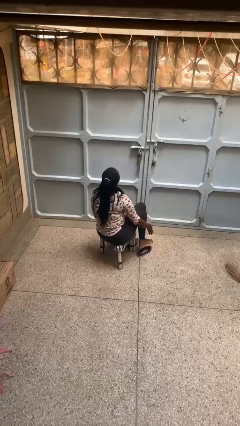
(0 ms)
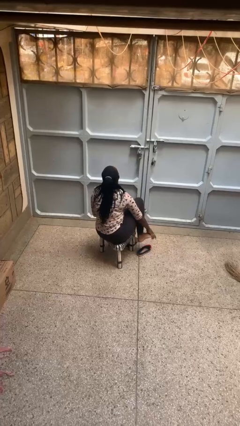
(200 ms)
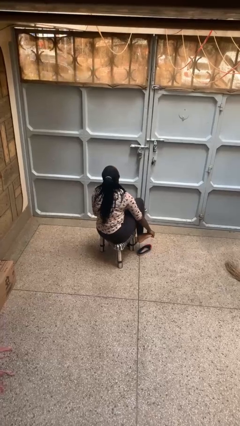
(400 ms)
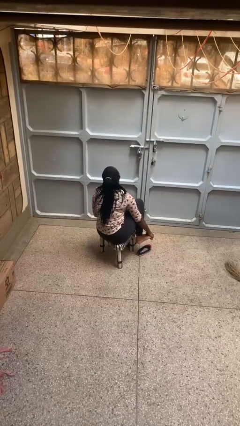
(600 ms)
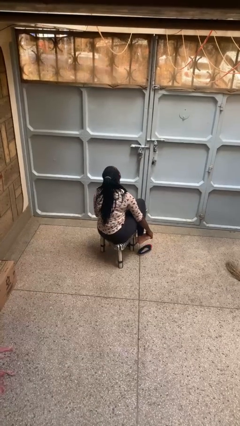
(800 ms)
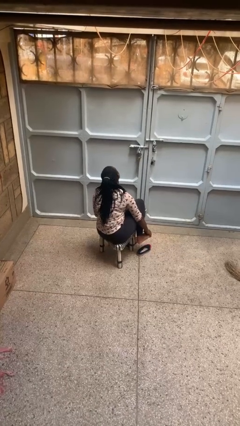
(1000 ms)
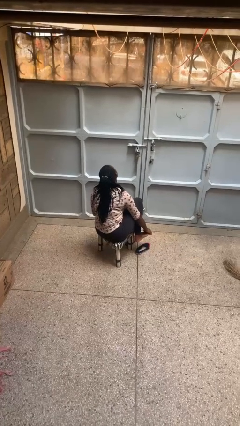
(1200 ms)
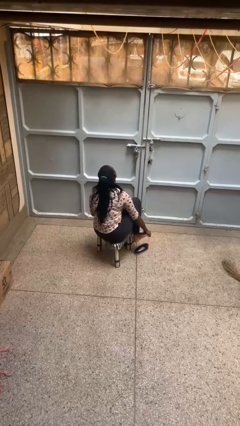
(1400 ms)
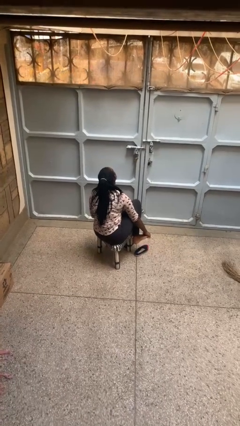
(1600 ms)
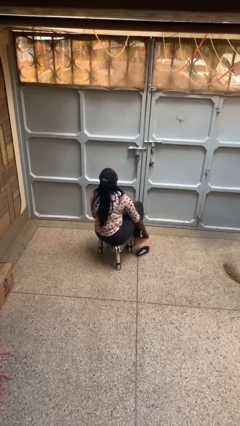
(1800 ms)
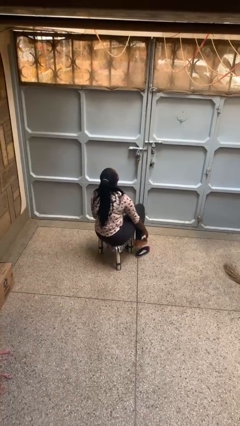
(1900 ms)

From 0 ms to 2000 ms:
person rubs foot

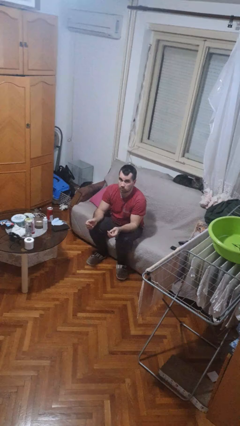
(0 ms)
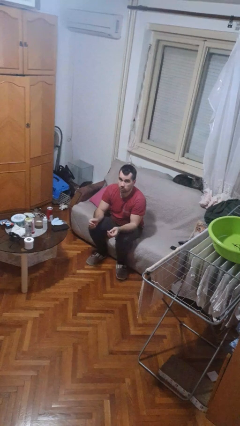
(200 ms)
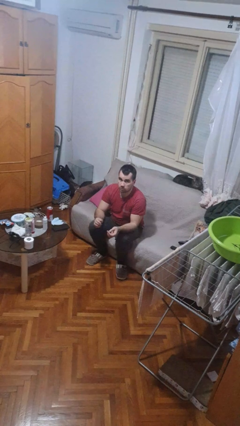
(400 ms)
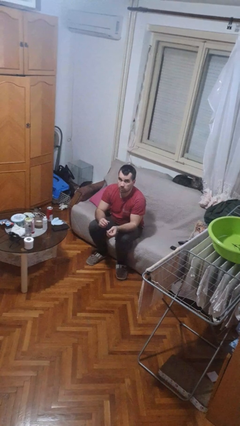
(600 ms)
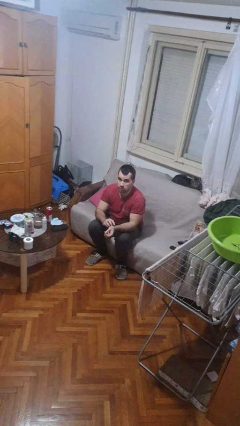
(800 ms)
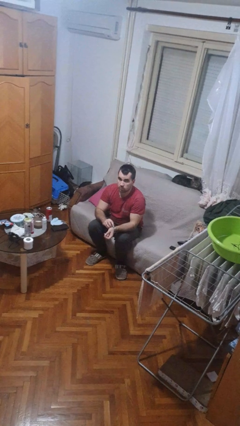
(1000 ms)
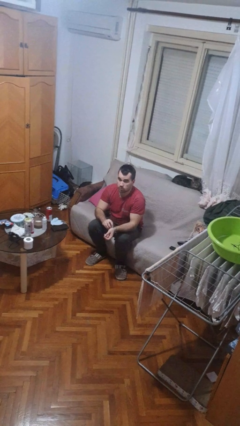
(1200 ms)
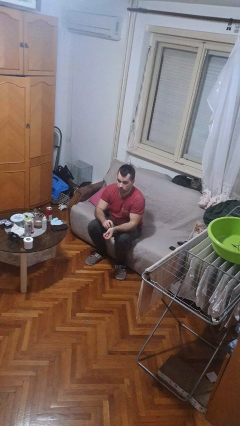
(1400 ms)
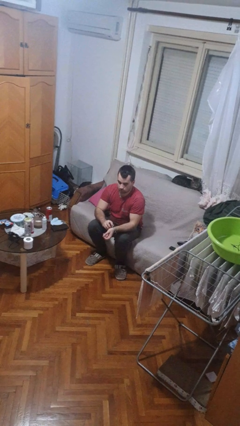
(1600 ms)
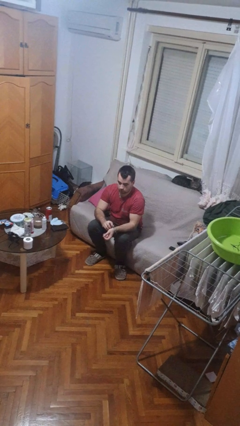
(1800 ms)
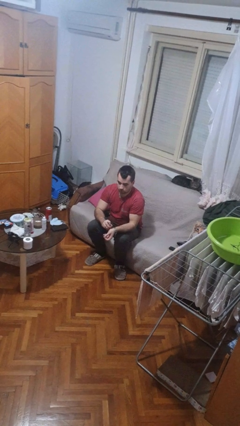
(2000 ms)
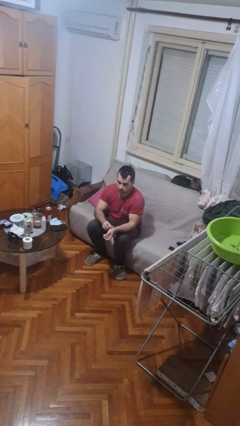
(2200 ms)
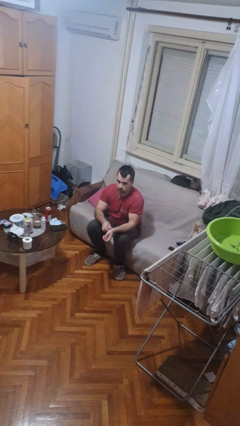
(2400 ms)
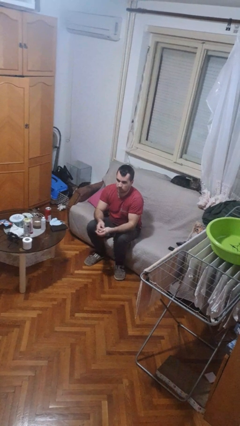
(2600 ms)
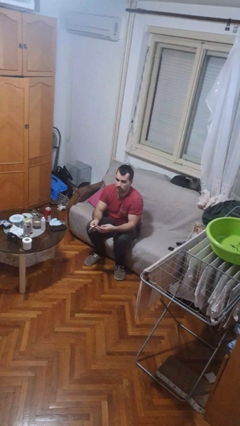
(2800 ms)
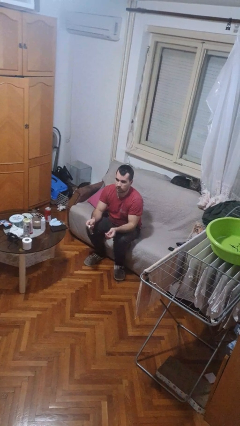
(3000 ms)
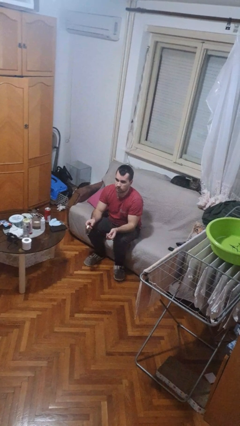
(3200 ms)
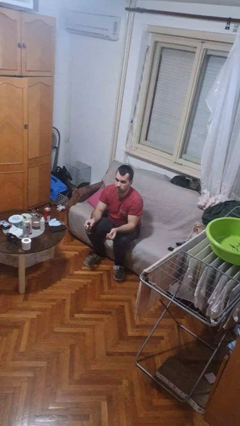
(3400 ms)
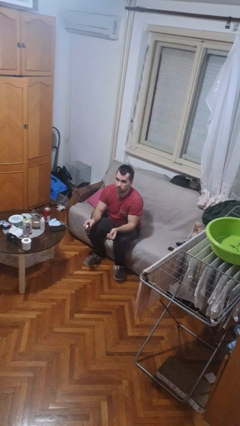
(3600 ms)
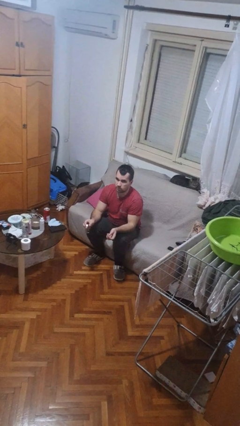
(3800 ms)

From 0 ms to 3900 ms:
person takes off wristwatch

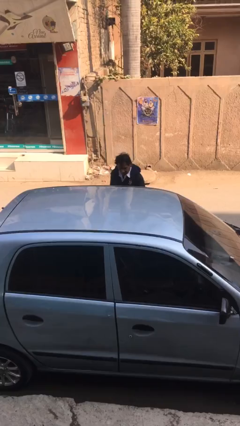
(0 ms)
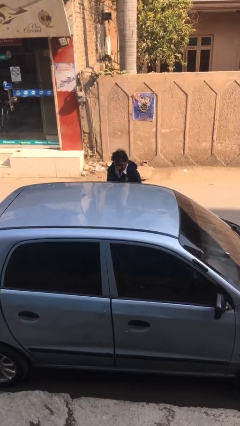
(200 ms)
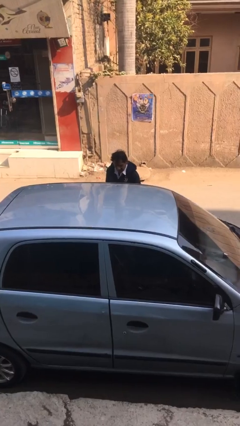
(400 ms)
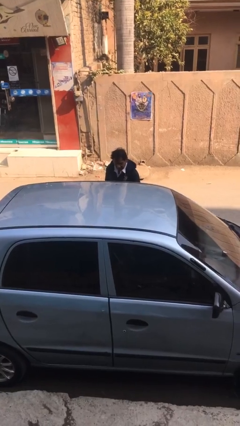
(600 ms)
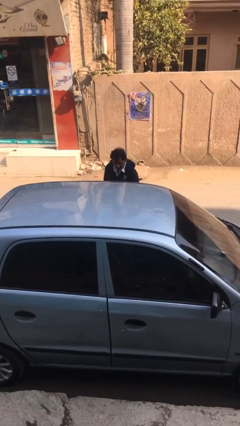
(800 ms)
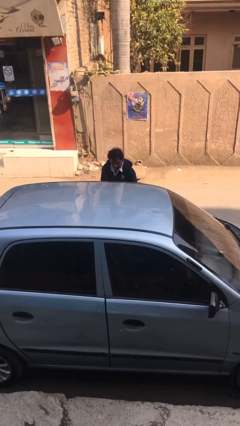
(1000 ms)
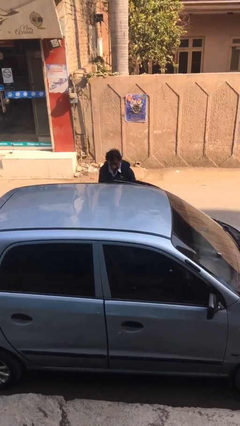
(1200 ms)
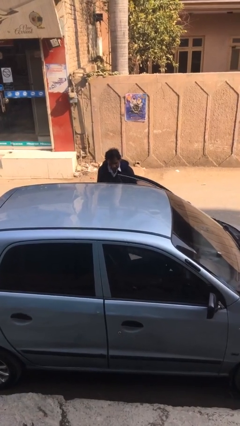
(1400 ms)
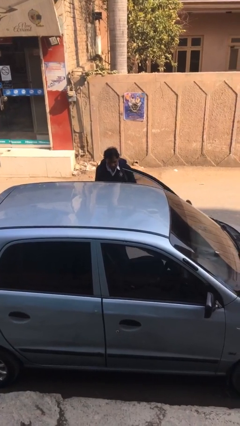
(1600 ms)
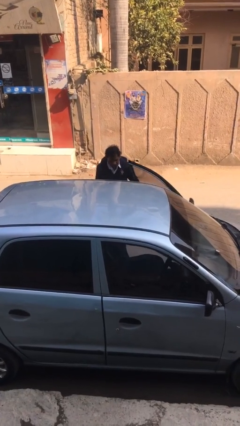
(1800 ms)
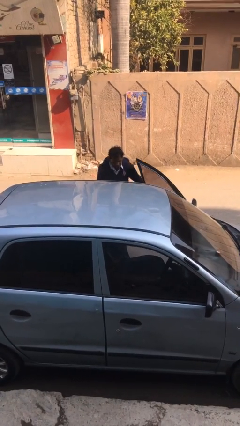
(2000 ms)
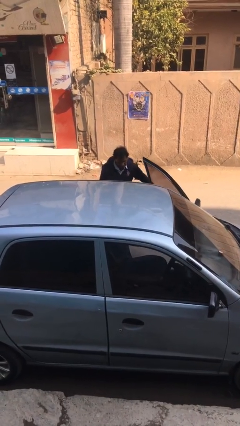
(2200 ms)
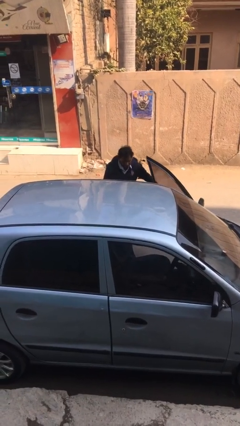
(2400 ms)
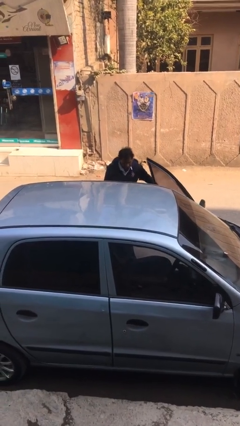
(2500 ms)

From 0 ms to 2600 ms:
person opens car door

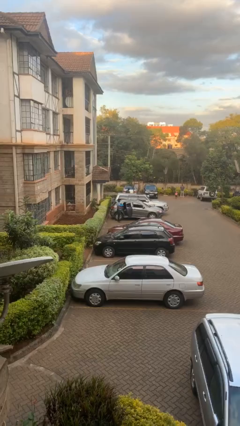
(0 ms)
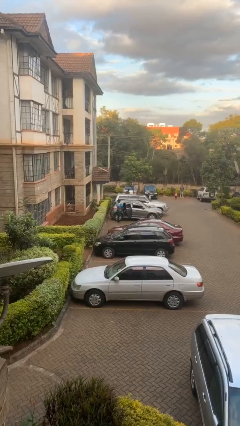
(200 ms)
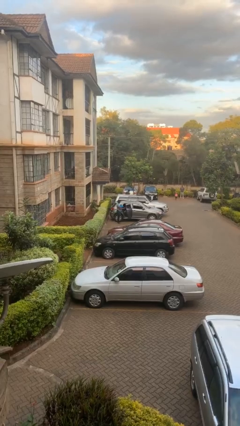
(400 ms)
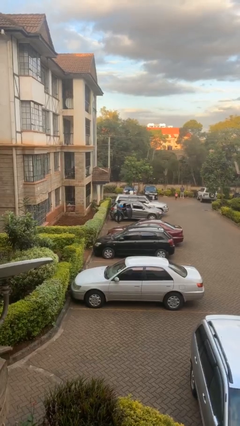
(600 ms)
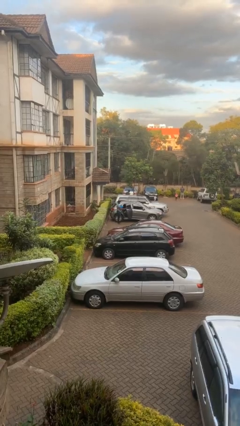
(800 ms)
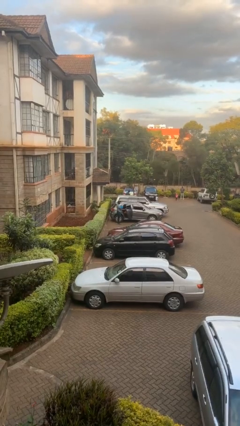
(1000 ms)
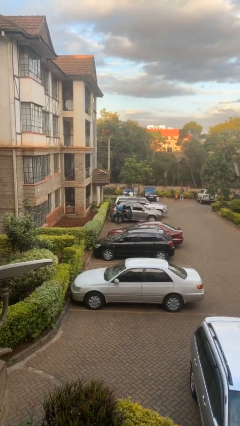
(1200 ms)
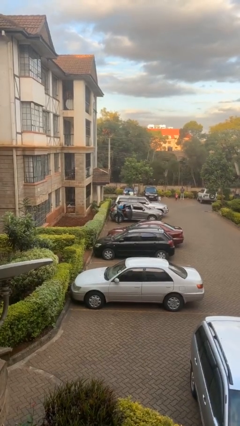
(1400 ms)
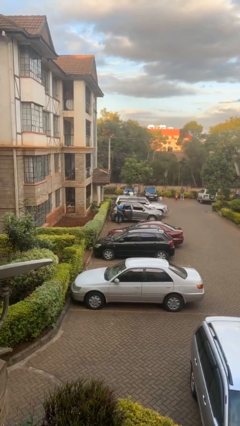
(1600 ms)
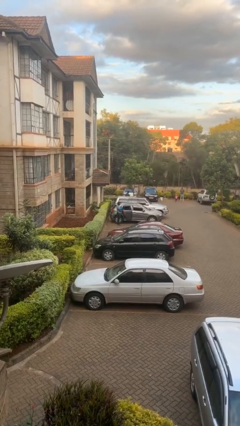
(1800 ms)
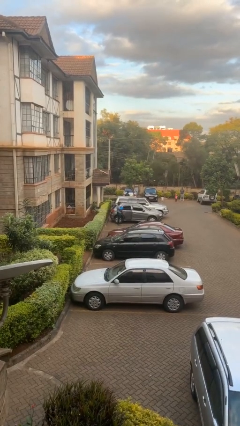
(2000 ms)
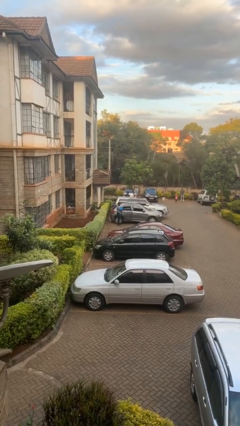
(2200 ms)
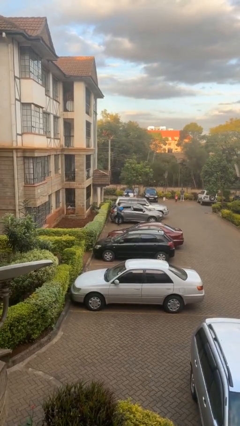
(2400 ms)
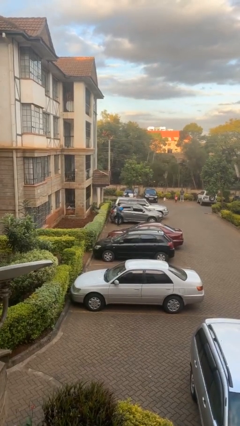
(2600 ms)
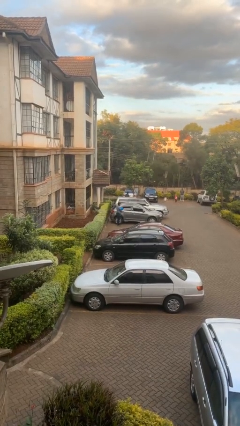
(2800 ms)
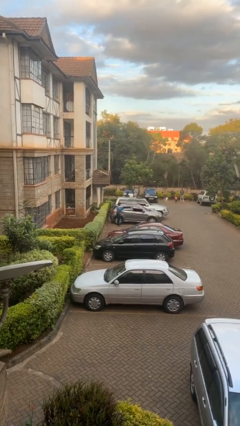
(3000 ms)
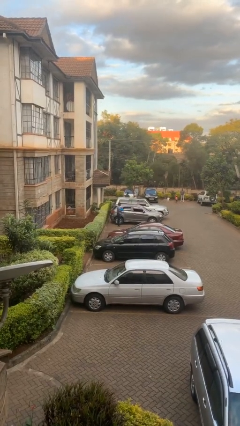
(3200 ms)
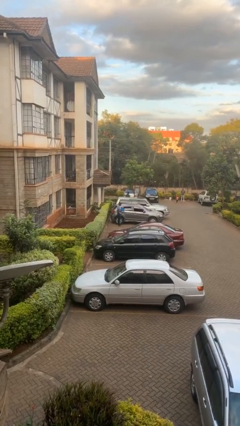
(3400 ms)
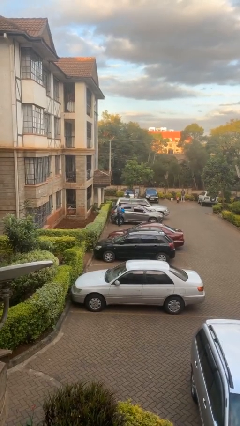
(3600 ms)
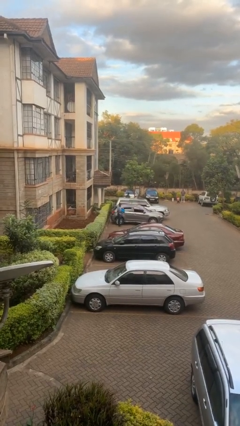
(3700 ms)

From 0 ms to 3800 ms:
person closes car door

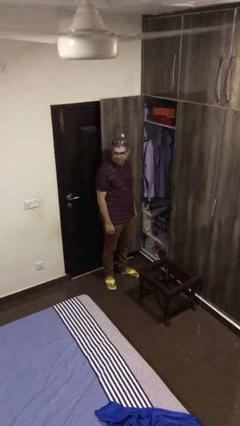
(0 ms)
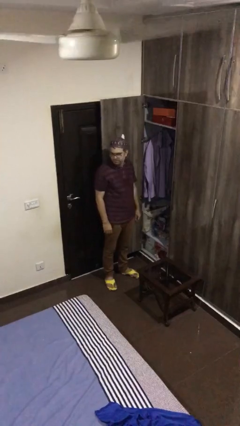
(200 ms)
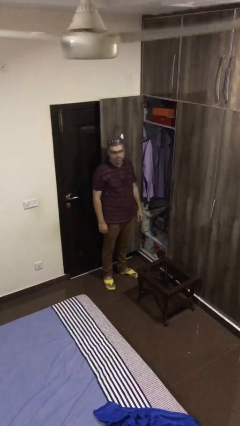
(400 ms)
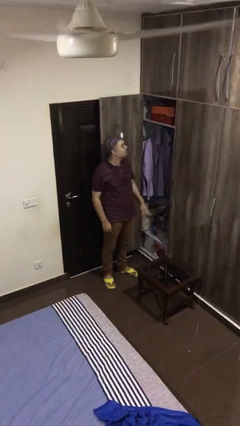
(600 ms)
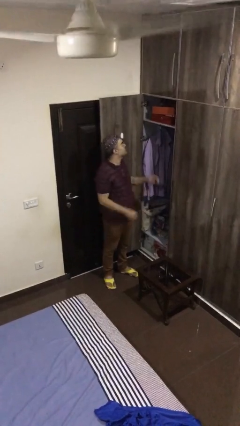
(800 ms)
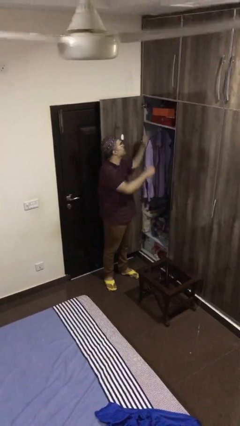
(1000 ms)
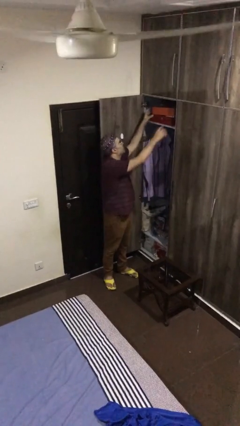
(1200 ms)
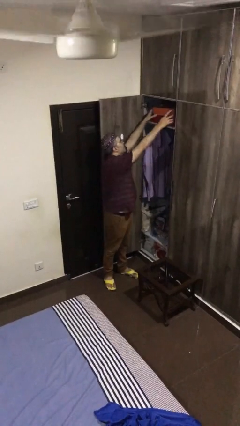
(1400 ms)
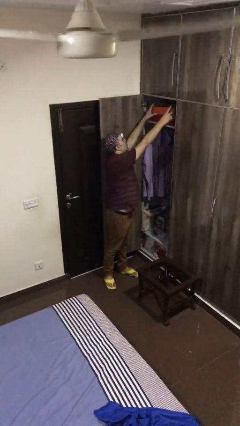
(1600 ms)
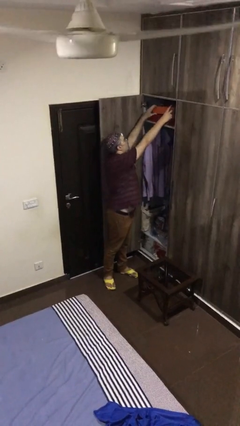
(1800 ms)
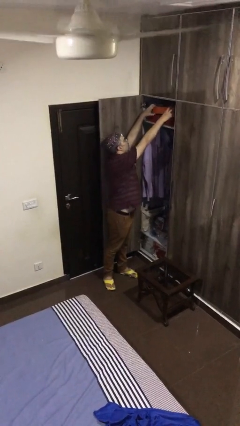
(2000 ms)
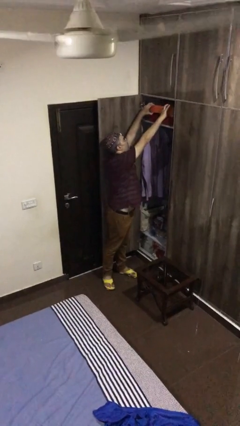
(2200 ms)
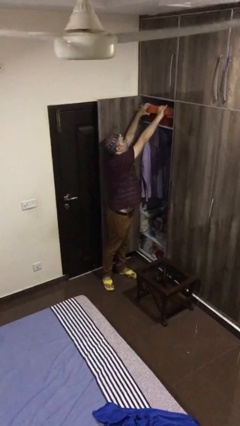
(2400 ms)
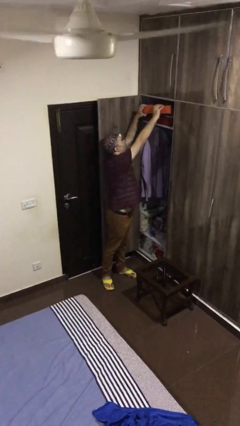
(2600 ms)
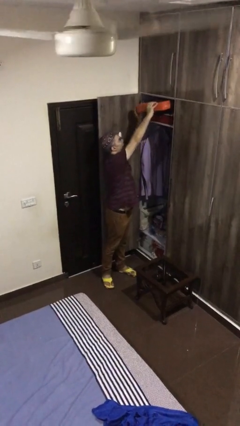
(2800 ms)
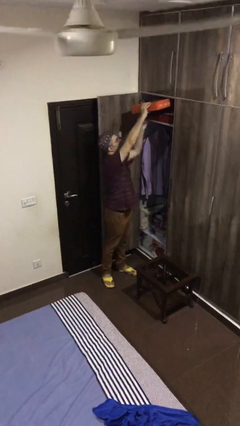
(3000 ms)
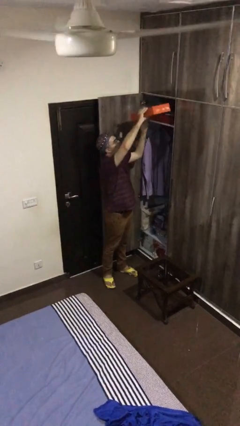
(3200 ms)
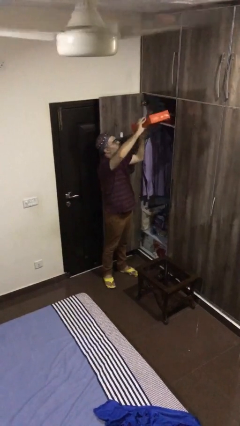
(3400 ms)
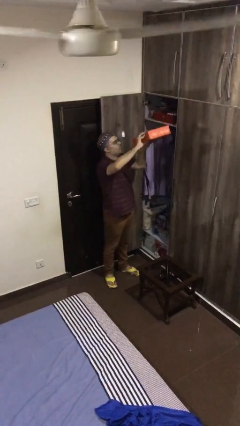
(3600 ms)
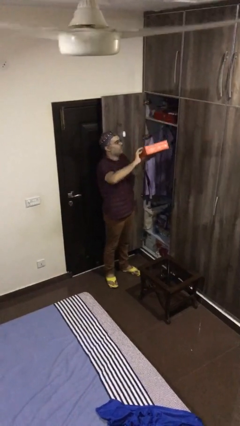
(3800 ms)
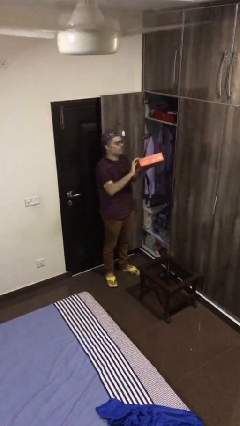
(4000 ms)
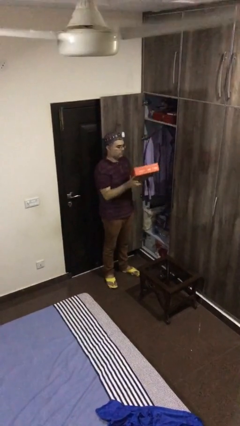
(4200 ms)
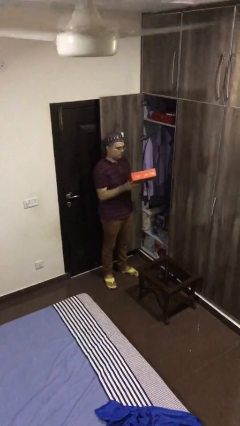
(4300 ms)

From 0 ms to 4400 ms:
person picks up object from shelf

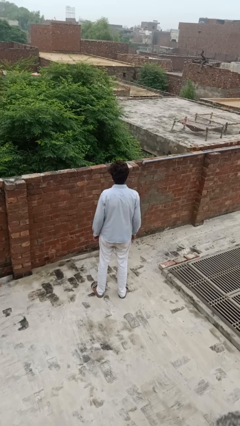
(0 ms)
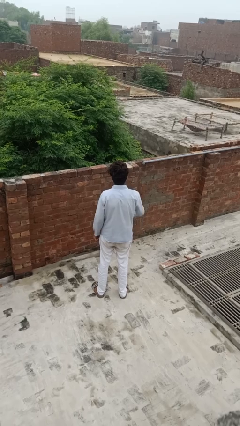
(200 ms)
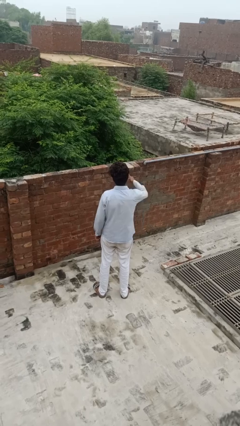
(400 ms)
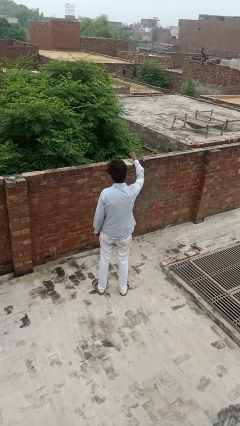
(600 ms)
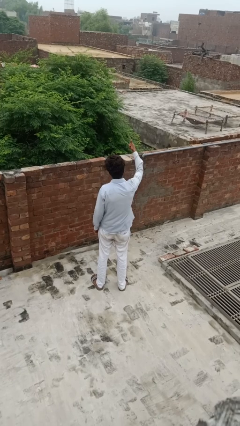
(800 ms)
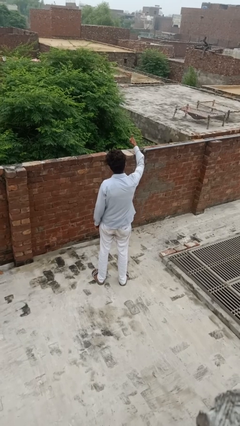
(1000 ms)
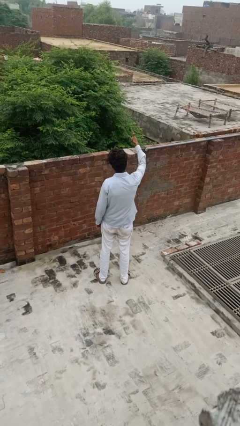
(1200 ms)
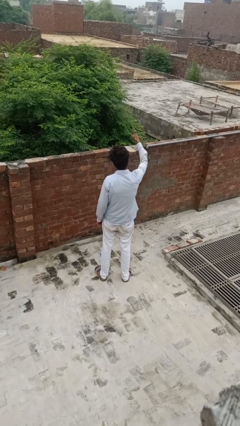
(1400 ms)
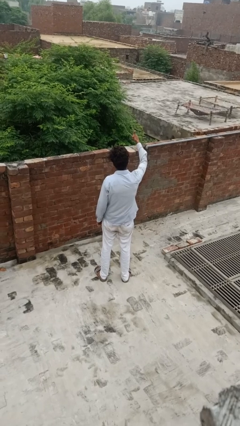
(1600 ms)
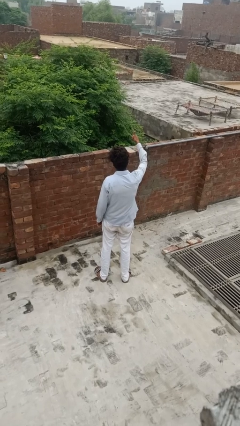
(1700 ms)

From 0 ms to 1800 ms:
person gestures thumbs up
